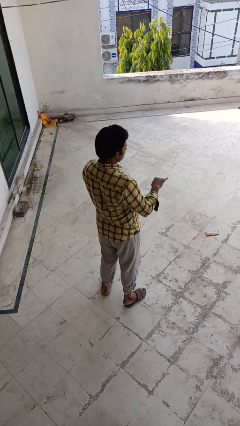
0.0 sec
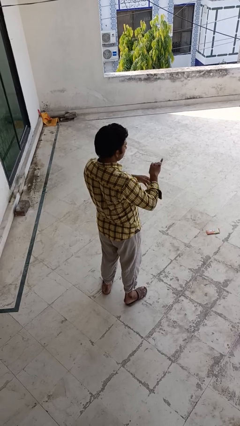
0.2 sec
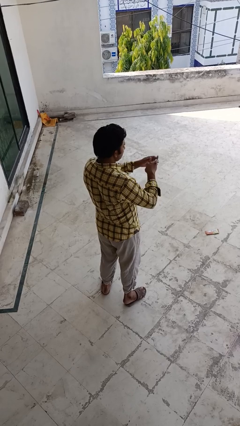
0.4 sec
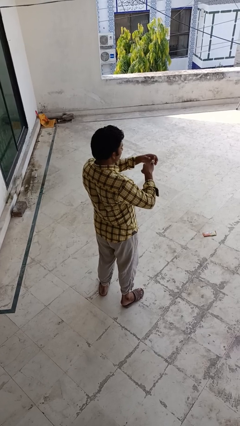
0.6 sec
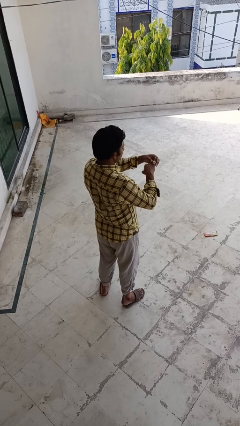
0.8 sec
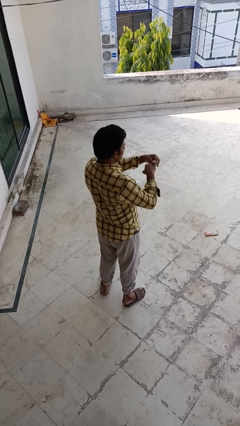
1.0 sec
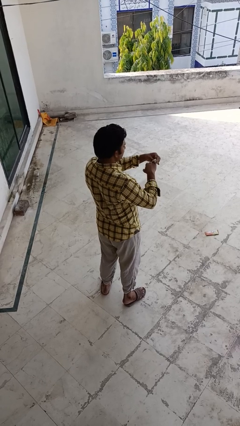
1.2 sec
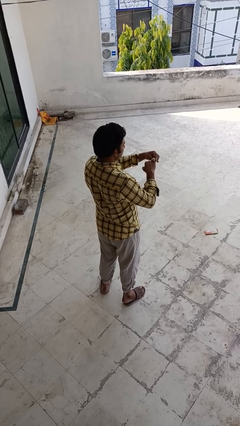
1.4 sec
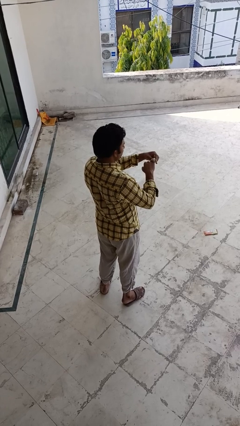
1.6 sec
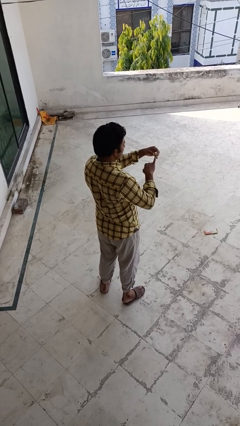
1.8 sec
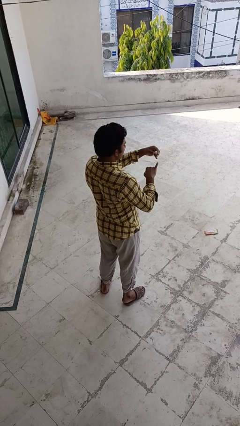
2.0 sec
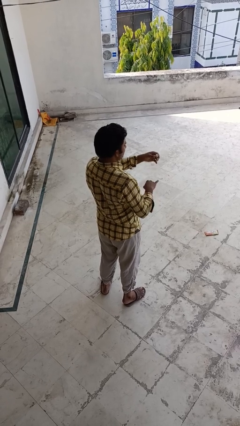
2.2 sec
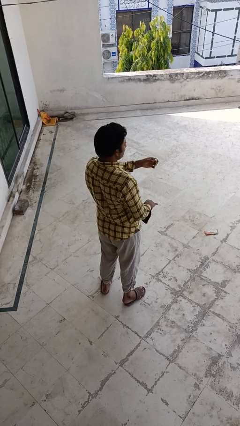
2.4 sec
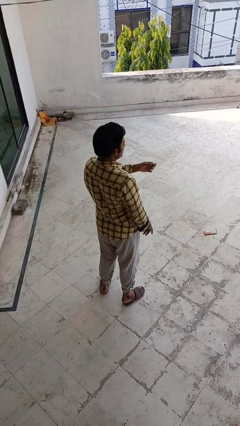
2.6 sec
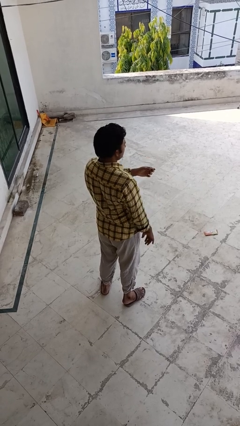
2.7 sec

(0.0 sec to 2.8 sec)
person takes off ring

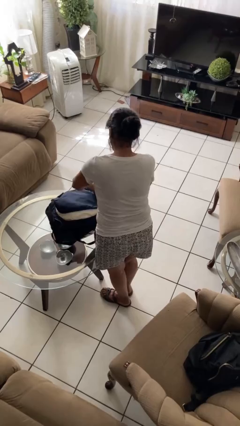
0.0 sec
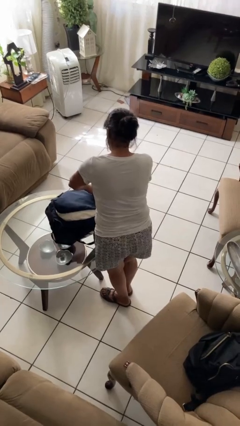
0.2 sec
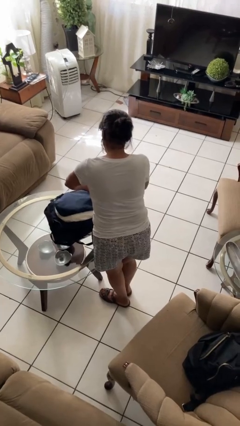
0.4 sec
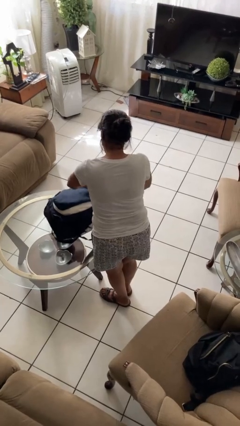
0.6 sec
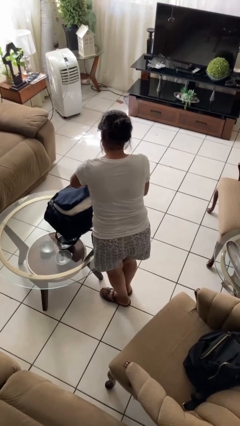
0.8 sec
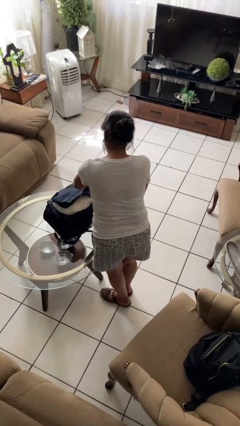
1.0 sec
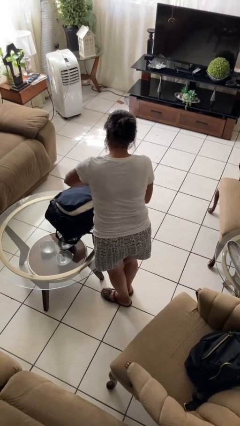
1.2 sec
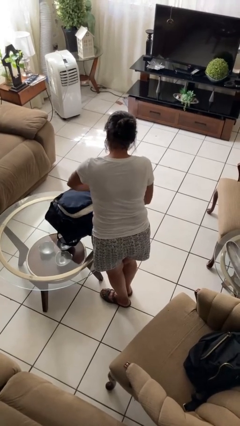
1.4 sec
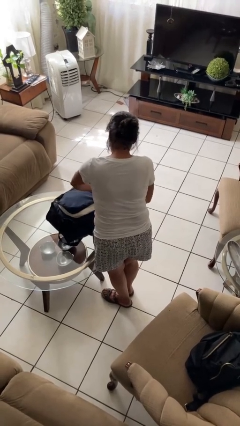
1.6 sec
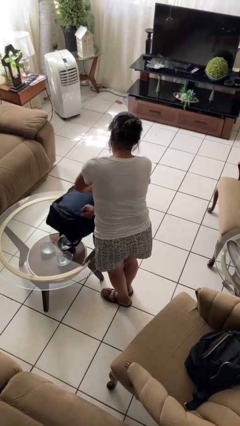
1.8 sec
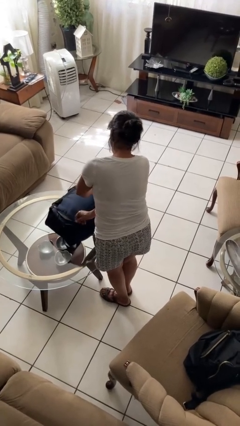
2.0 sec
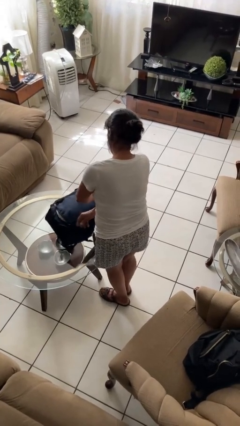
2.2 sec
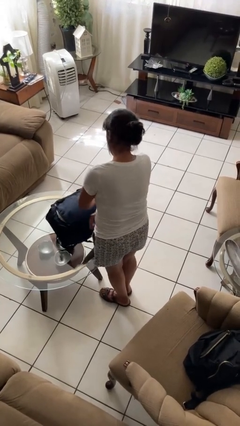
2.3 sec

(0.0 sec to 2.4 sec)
person closes suitcase

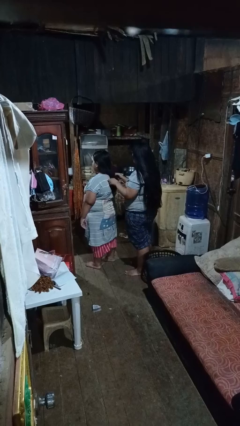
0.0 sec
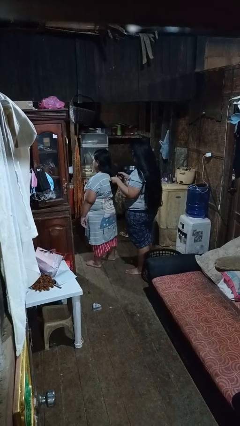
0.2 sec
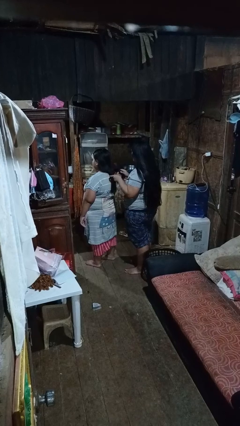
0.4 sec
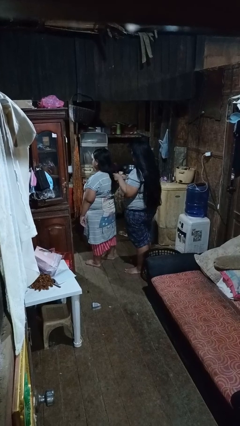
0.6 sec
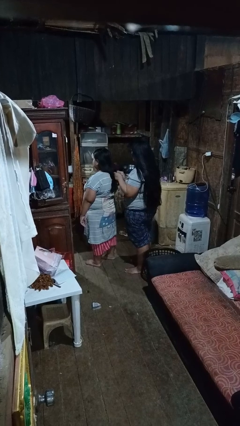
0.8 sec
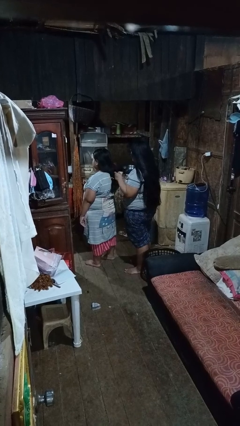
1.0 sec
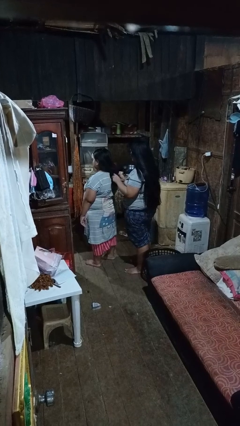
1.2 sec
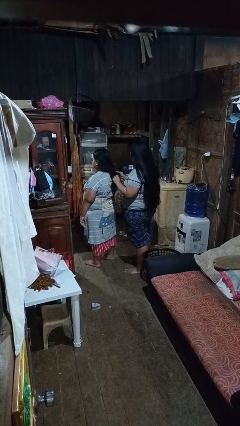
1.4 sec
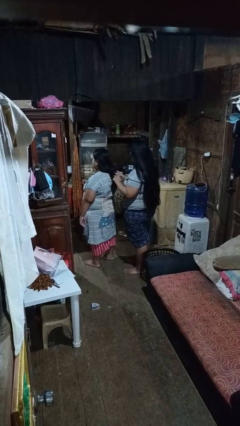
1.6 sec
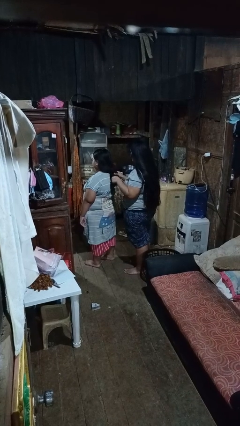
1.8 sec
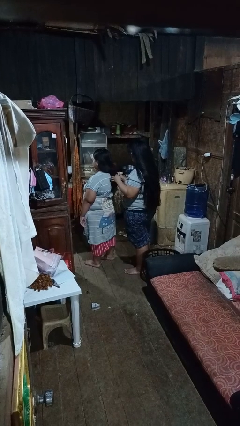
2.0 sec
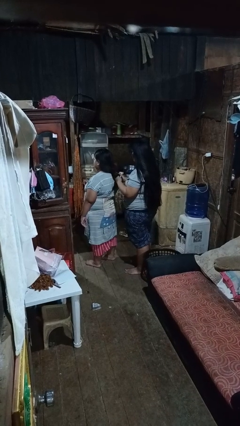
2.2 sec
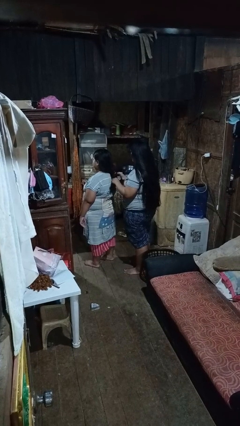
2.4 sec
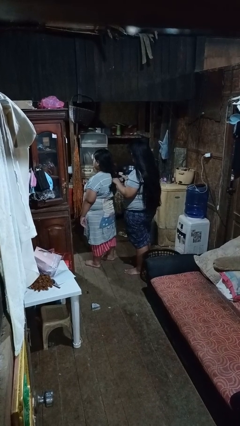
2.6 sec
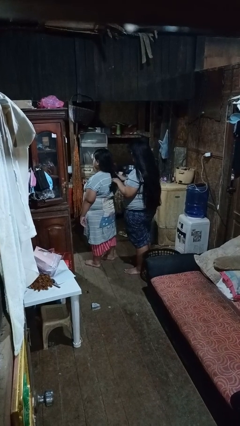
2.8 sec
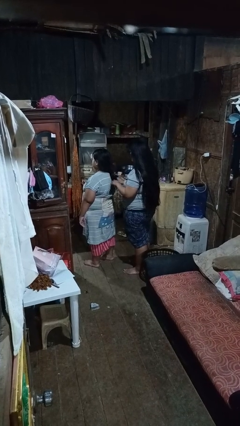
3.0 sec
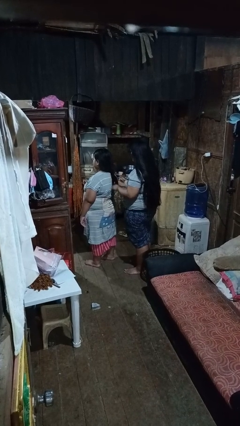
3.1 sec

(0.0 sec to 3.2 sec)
person braids hair of person

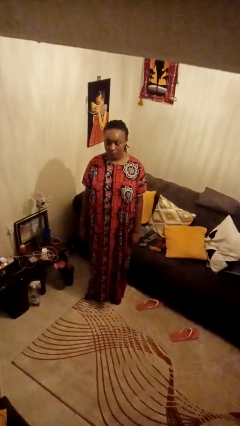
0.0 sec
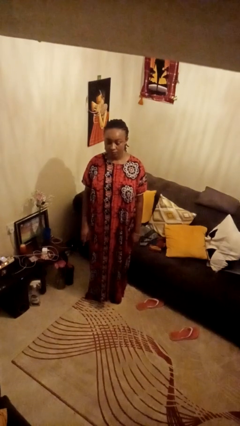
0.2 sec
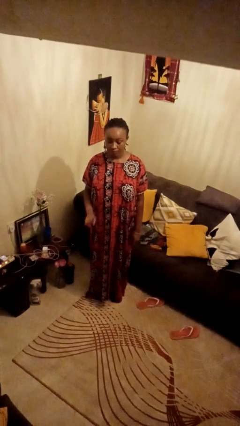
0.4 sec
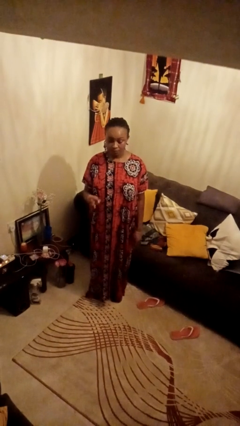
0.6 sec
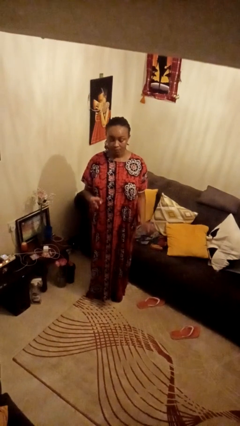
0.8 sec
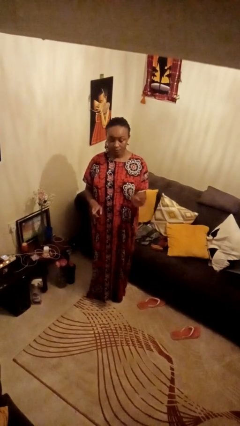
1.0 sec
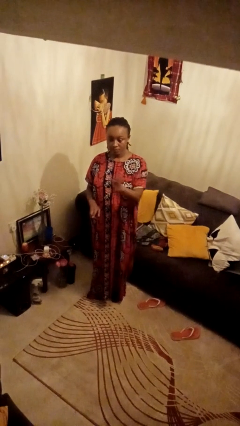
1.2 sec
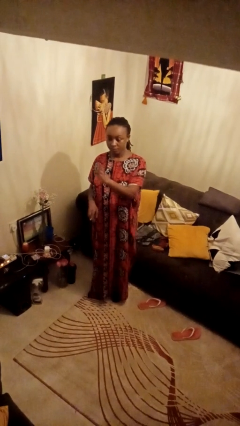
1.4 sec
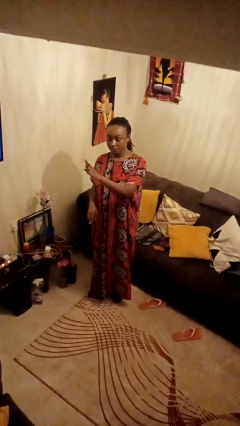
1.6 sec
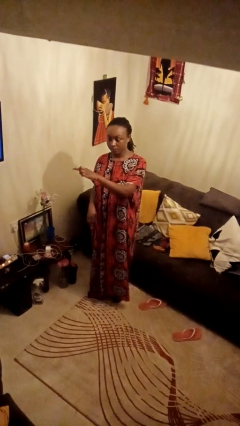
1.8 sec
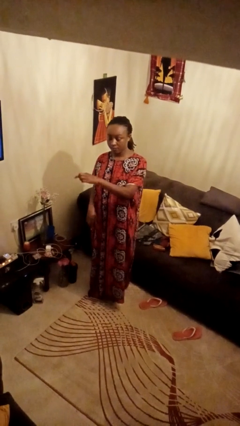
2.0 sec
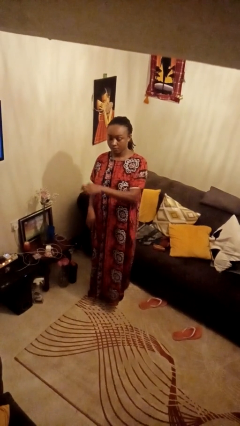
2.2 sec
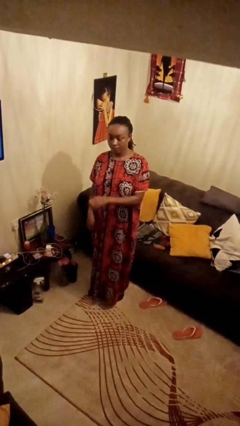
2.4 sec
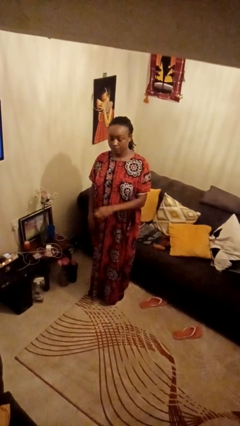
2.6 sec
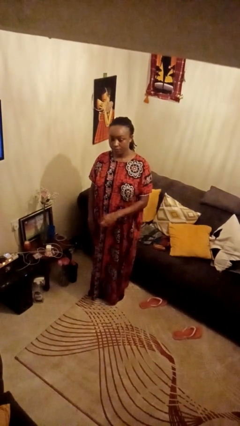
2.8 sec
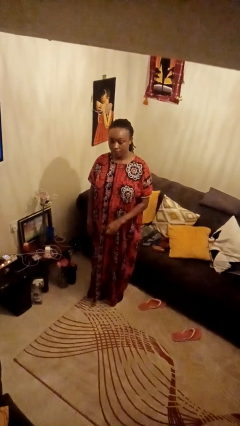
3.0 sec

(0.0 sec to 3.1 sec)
person gestures swipe left

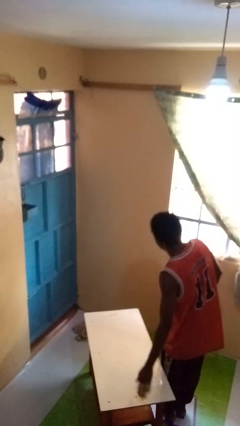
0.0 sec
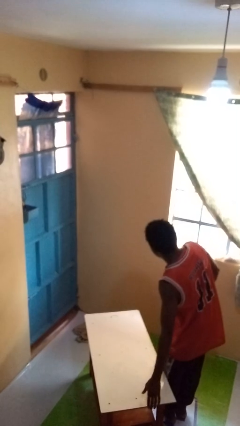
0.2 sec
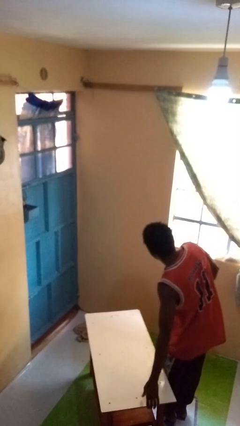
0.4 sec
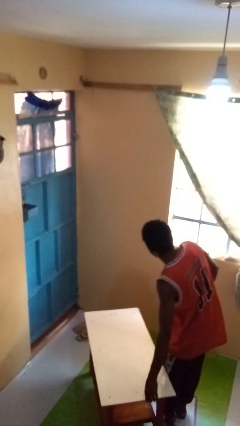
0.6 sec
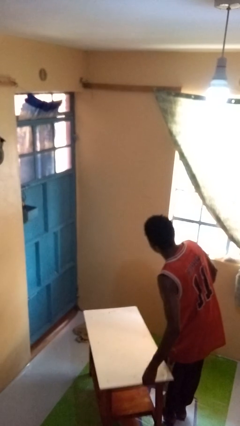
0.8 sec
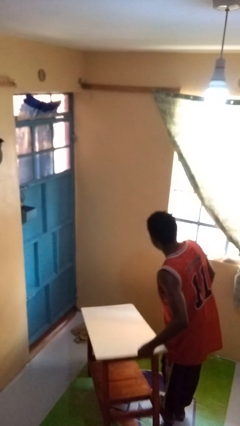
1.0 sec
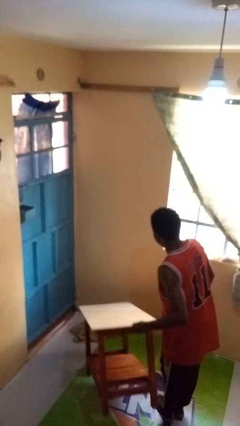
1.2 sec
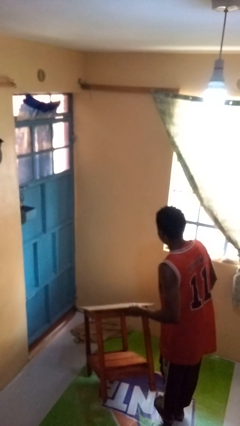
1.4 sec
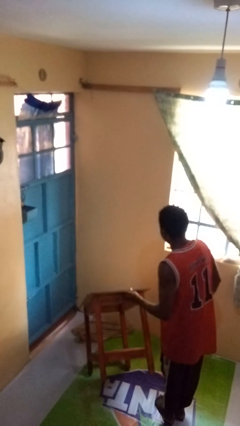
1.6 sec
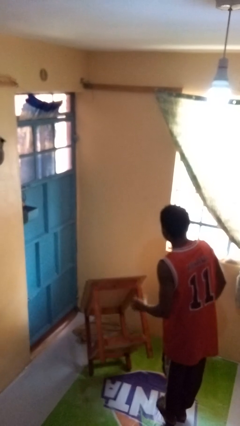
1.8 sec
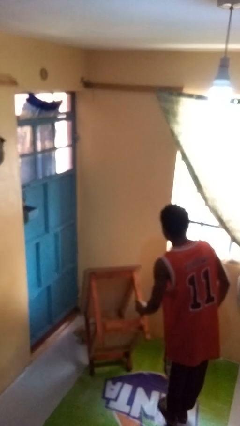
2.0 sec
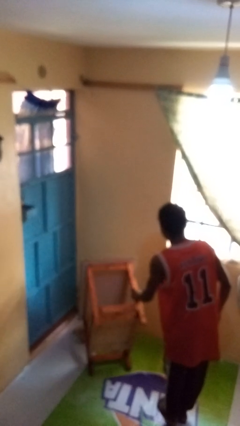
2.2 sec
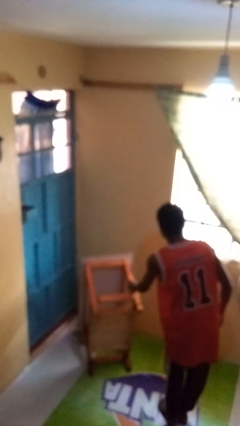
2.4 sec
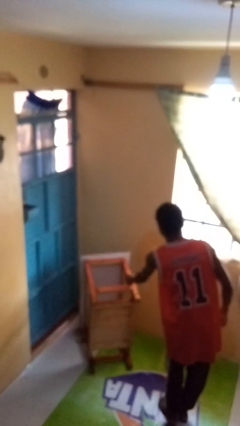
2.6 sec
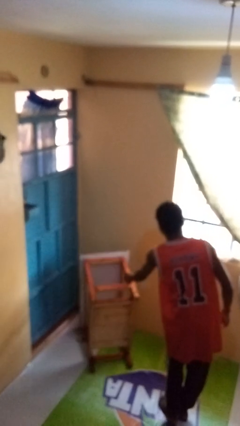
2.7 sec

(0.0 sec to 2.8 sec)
person knocks over furniture

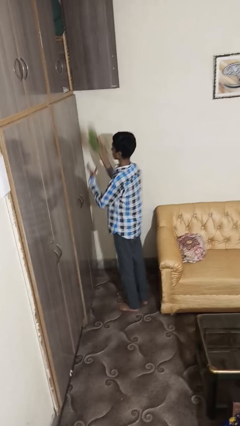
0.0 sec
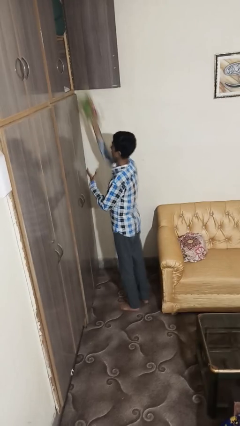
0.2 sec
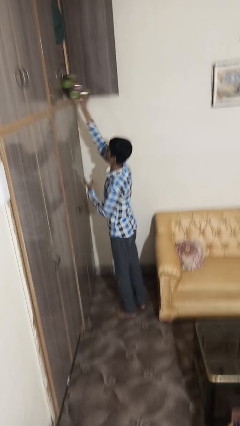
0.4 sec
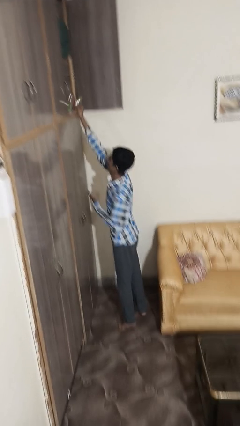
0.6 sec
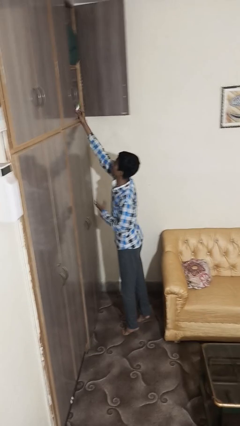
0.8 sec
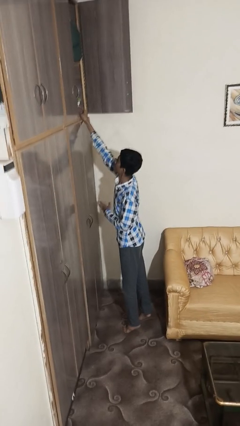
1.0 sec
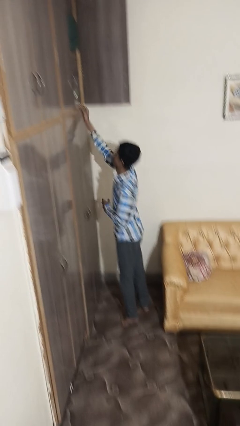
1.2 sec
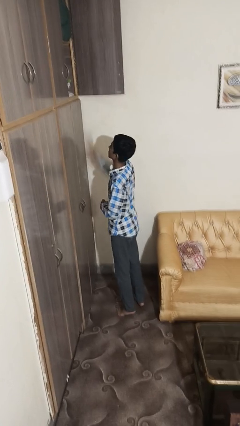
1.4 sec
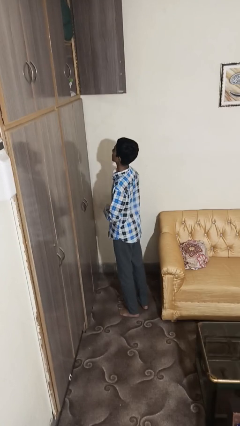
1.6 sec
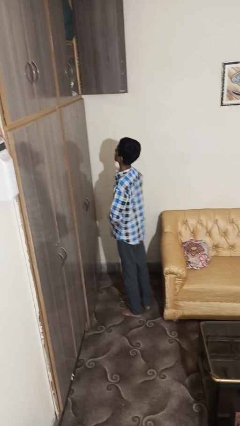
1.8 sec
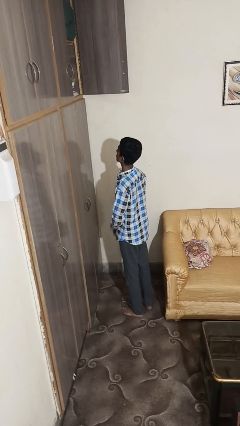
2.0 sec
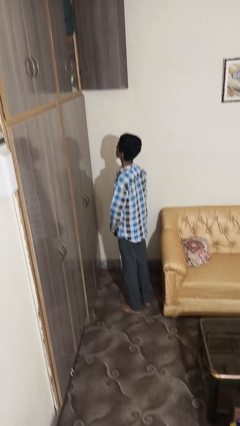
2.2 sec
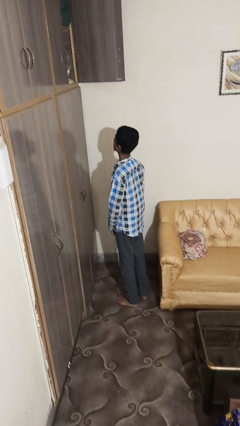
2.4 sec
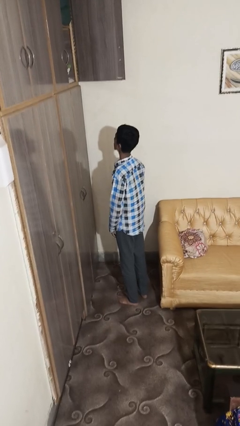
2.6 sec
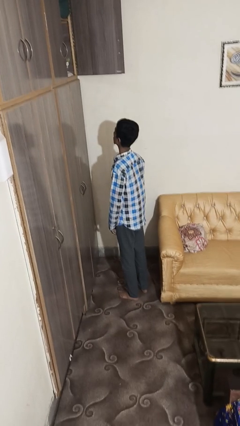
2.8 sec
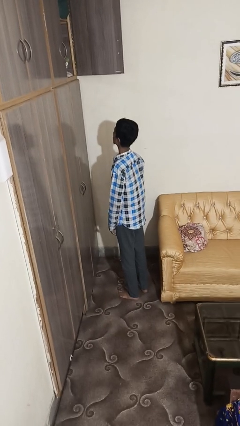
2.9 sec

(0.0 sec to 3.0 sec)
person puts down object on shelf

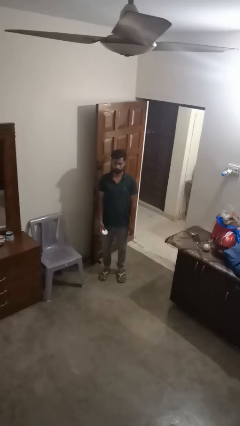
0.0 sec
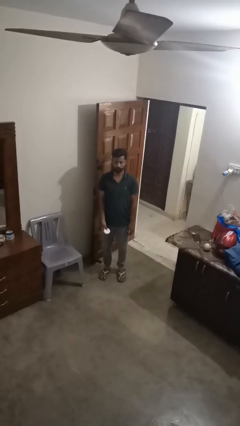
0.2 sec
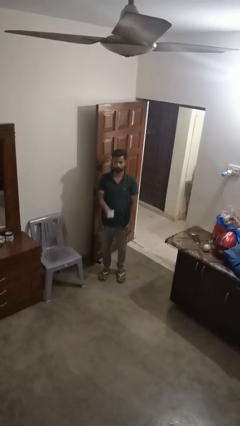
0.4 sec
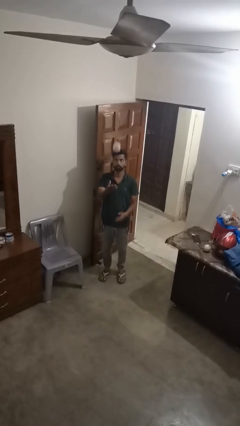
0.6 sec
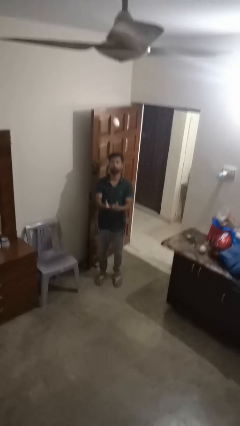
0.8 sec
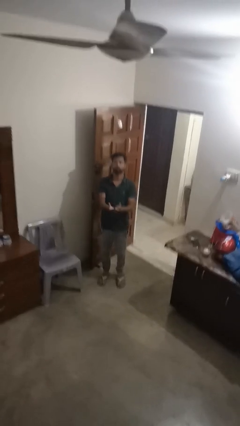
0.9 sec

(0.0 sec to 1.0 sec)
person drops object
